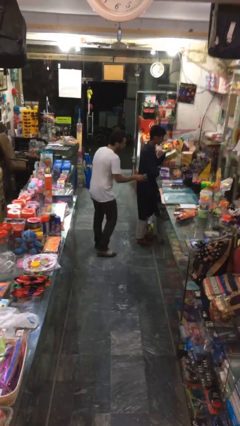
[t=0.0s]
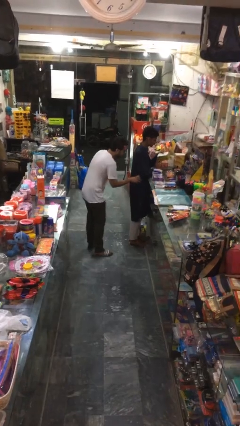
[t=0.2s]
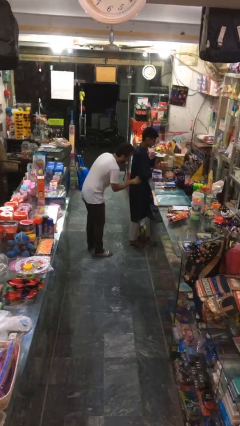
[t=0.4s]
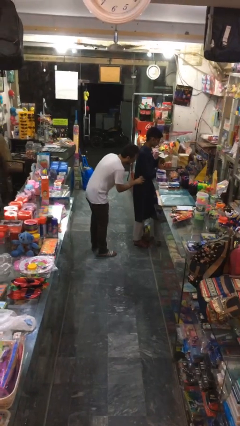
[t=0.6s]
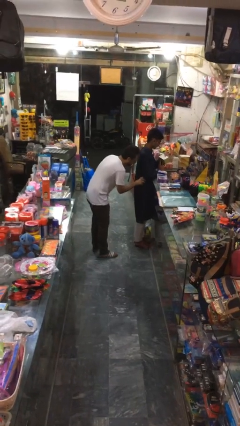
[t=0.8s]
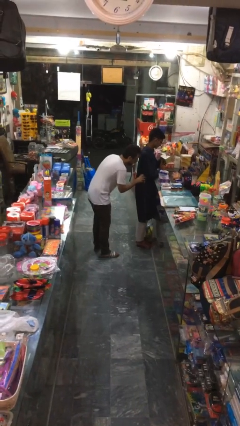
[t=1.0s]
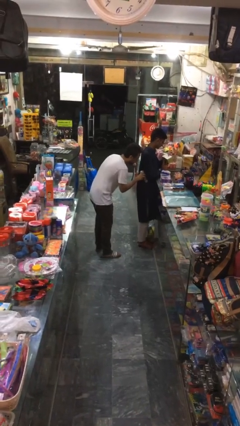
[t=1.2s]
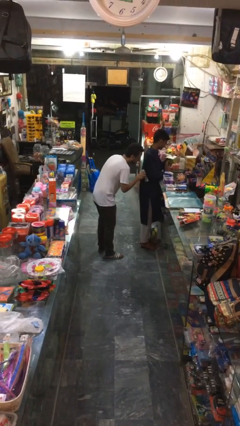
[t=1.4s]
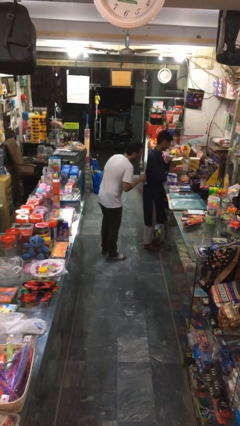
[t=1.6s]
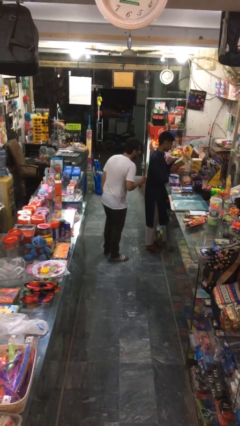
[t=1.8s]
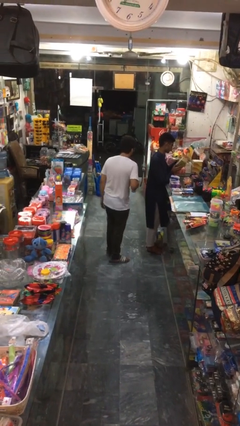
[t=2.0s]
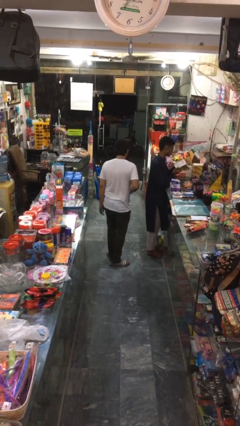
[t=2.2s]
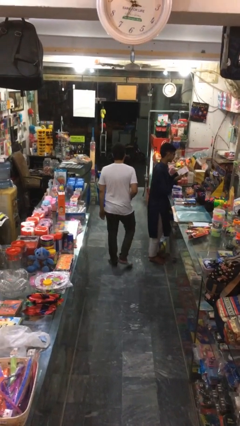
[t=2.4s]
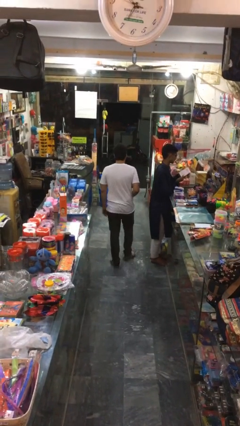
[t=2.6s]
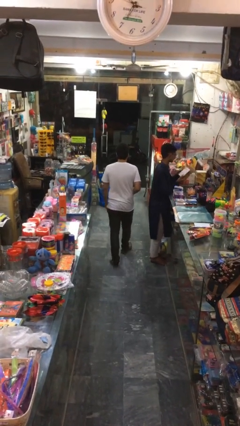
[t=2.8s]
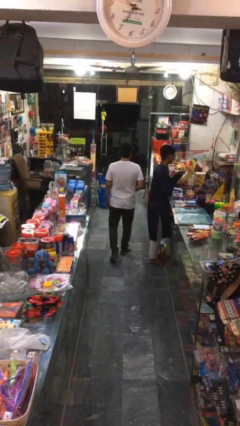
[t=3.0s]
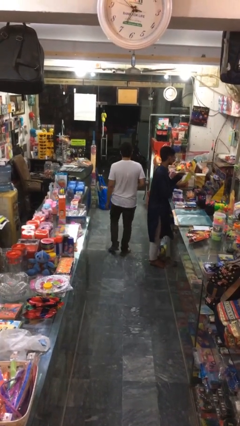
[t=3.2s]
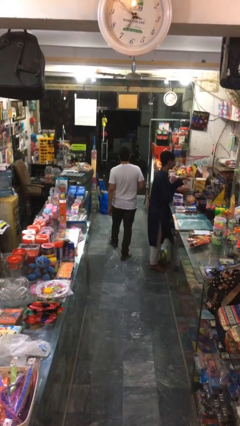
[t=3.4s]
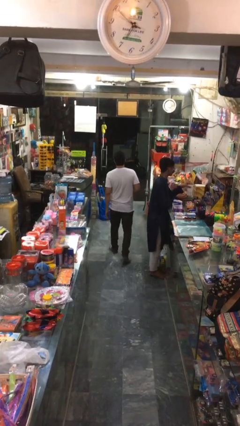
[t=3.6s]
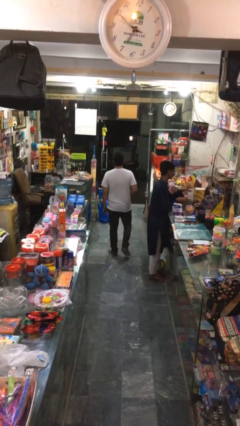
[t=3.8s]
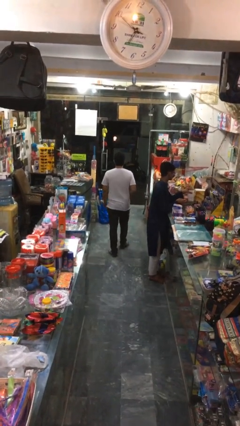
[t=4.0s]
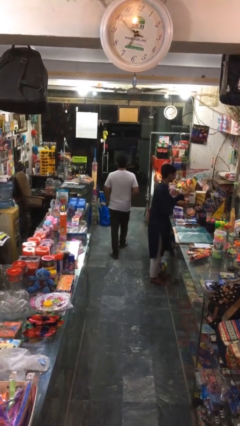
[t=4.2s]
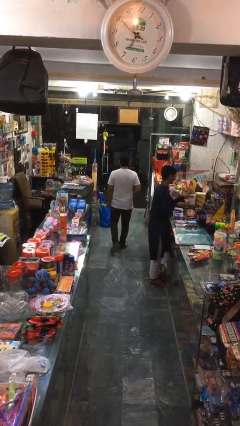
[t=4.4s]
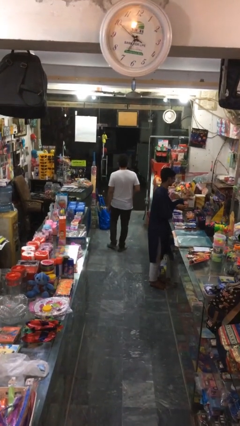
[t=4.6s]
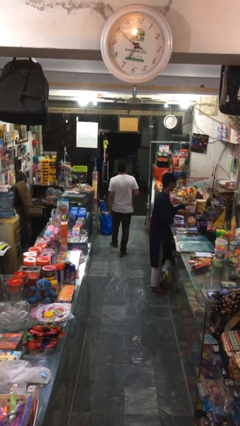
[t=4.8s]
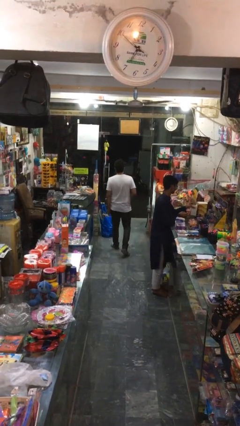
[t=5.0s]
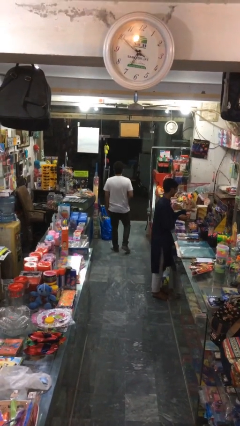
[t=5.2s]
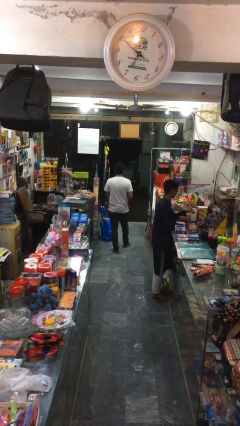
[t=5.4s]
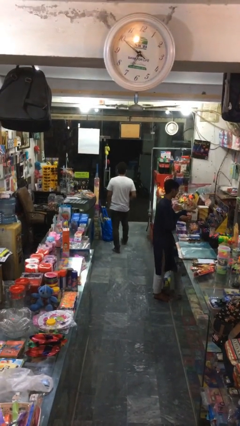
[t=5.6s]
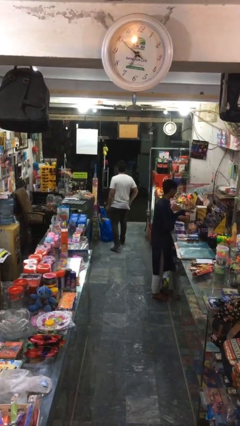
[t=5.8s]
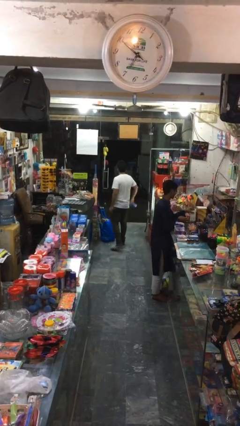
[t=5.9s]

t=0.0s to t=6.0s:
person steals object from person

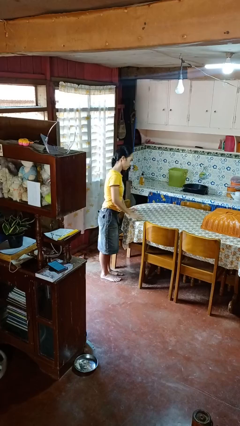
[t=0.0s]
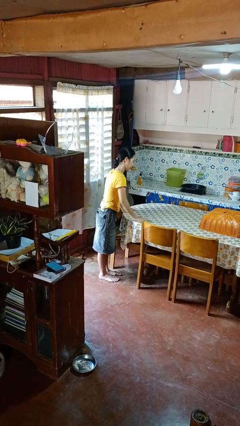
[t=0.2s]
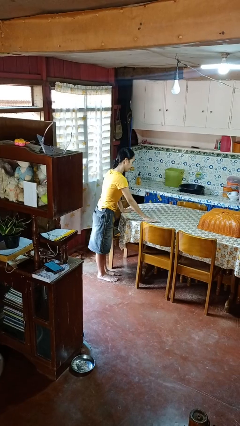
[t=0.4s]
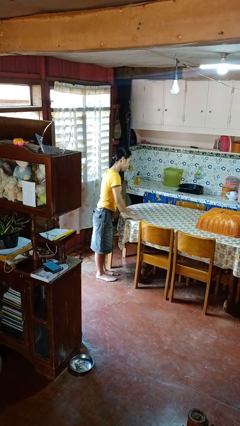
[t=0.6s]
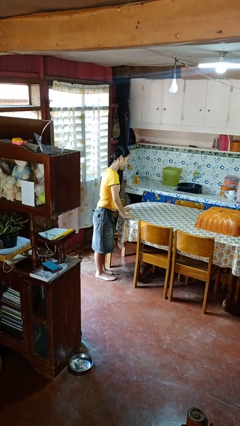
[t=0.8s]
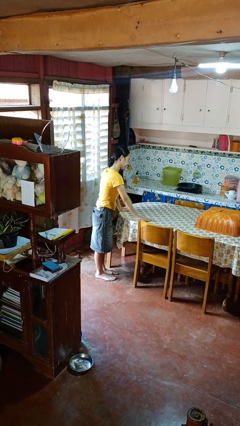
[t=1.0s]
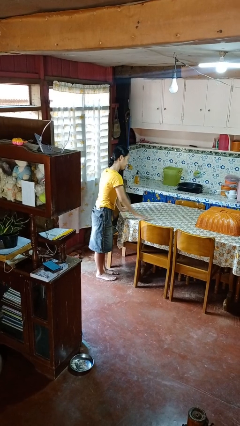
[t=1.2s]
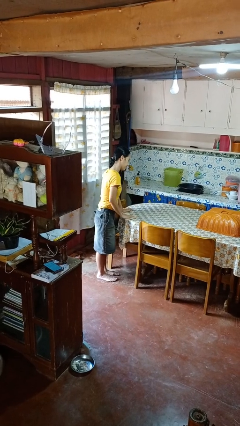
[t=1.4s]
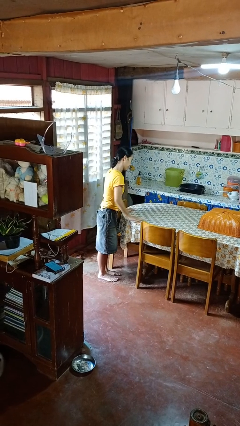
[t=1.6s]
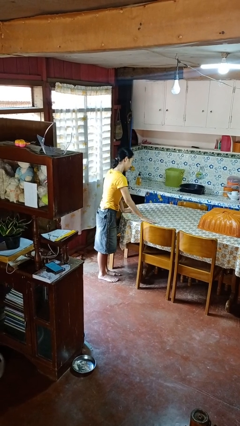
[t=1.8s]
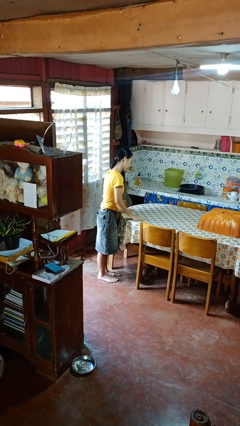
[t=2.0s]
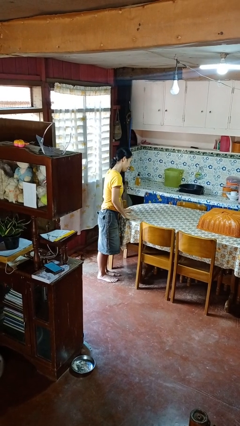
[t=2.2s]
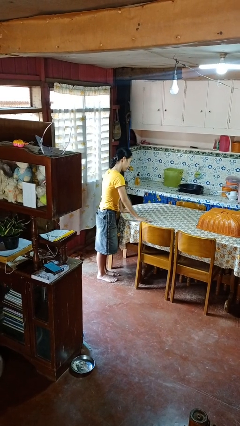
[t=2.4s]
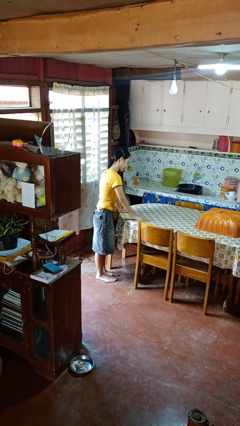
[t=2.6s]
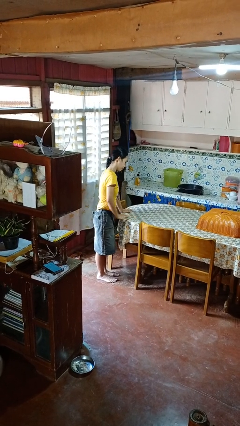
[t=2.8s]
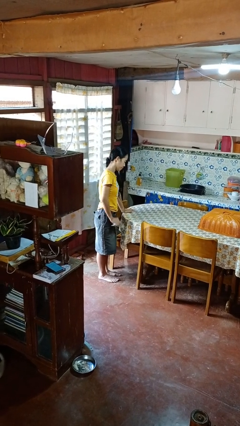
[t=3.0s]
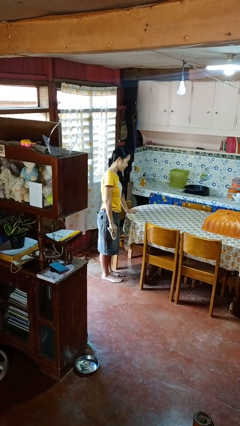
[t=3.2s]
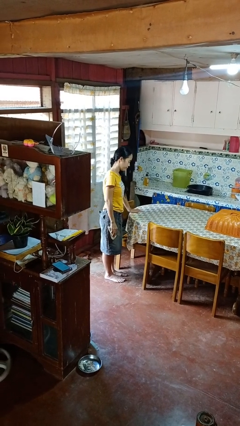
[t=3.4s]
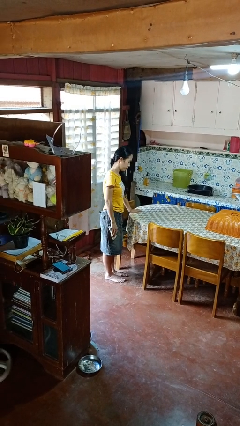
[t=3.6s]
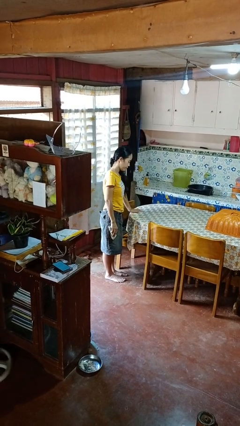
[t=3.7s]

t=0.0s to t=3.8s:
person cleans table with rag

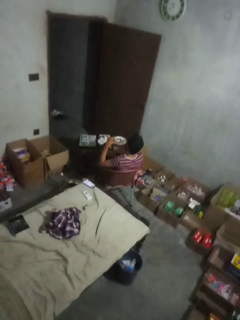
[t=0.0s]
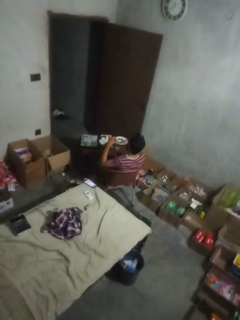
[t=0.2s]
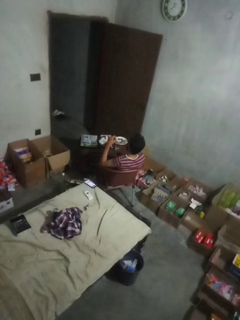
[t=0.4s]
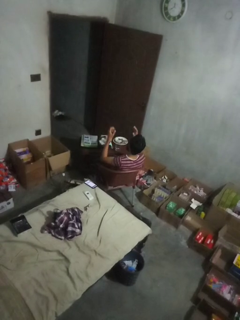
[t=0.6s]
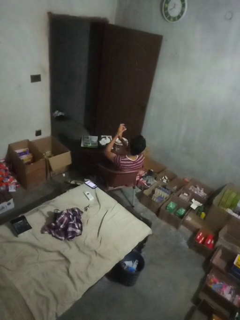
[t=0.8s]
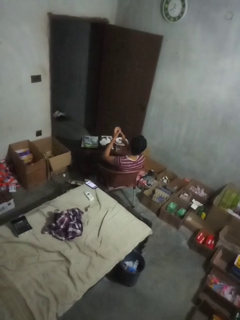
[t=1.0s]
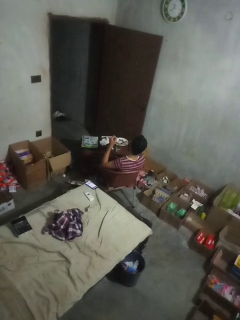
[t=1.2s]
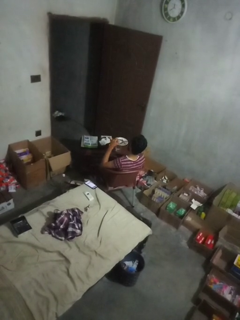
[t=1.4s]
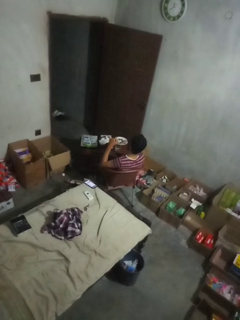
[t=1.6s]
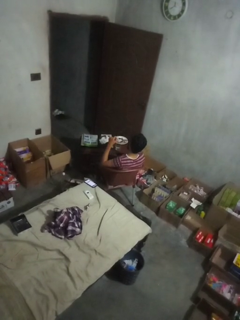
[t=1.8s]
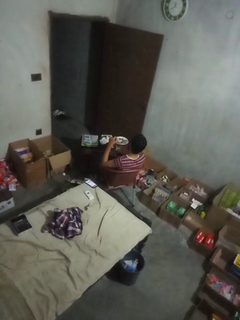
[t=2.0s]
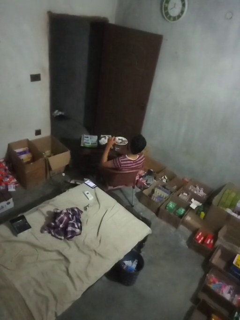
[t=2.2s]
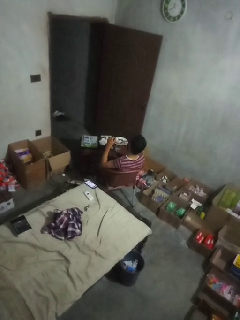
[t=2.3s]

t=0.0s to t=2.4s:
person claps hands

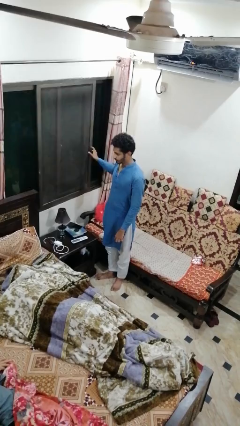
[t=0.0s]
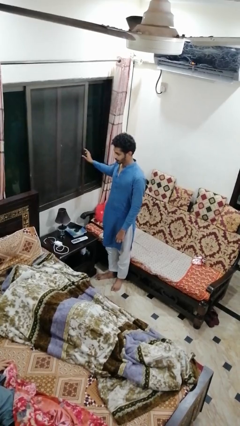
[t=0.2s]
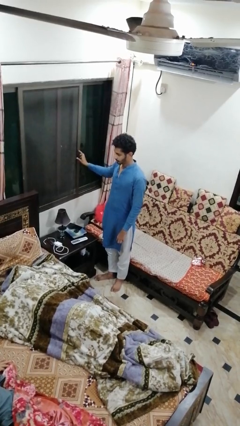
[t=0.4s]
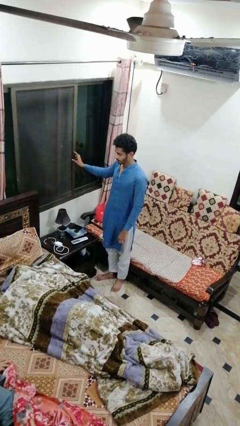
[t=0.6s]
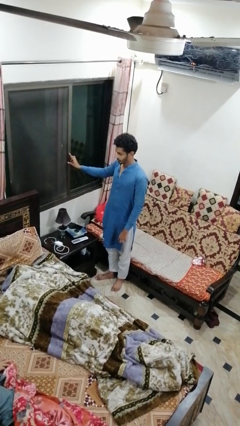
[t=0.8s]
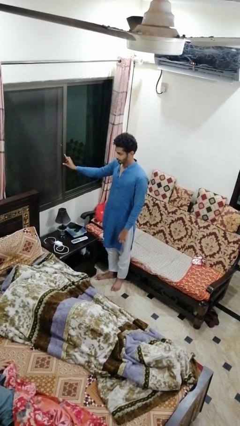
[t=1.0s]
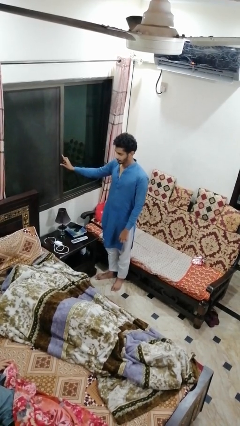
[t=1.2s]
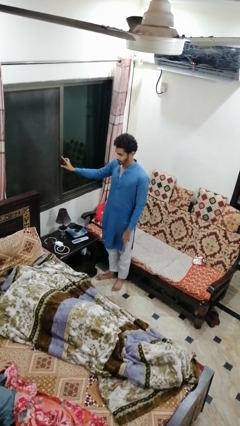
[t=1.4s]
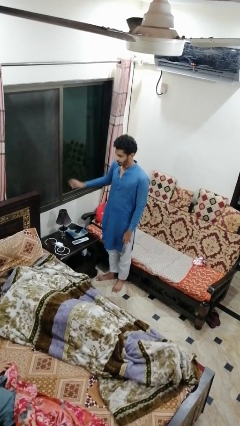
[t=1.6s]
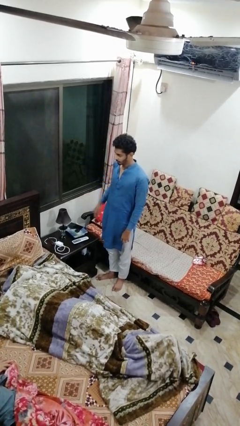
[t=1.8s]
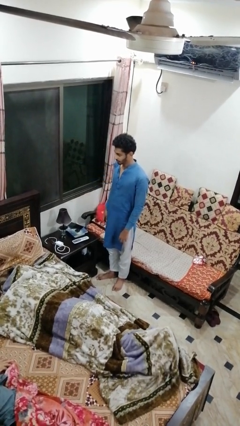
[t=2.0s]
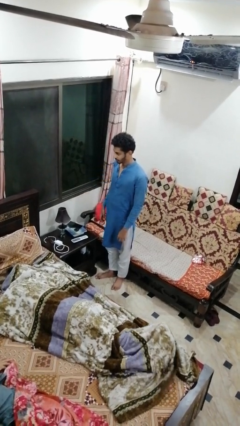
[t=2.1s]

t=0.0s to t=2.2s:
person closes home window

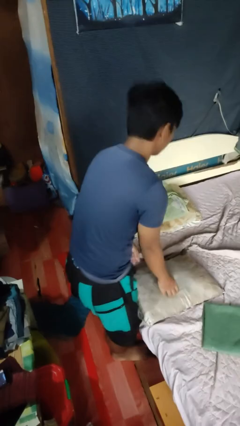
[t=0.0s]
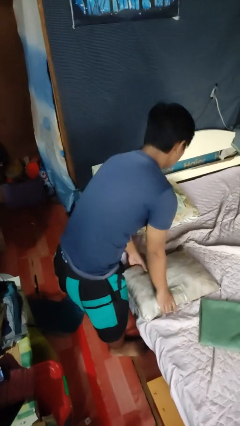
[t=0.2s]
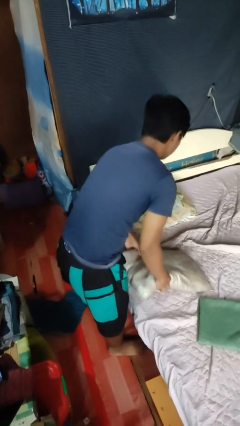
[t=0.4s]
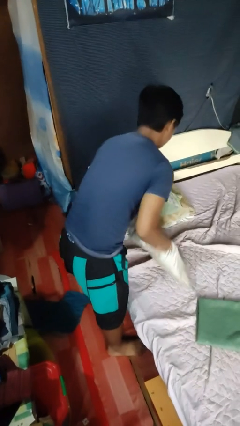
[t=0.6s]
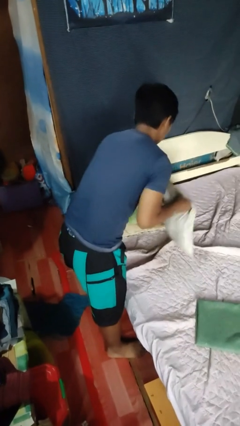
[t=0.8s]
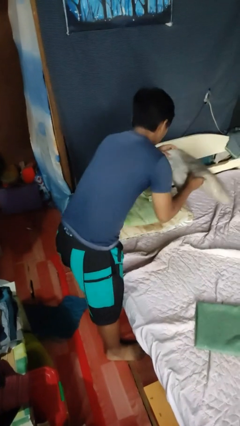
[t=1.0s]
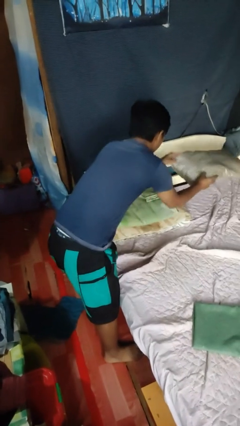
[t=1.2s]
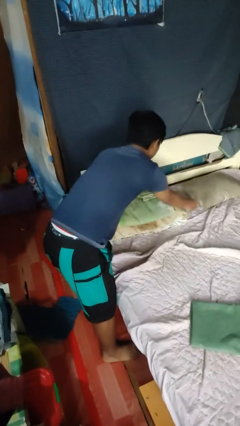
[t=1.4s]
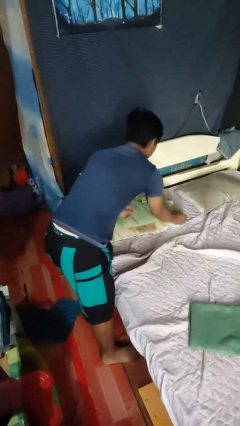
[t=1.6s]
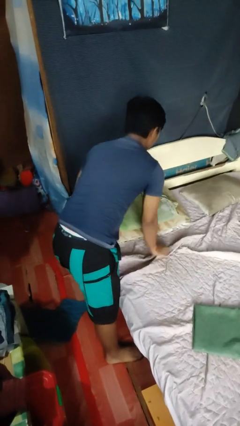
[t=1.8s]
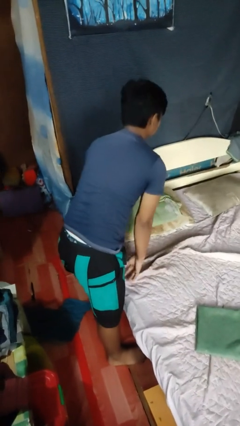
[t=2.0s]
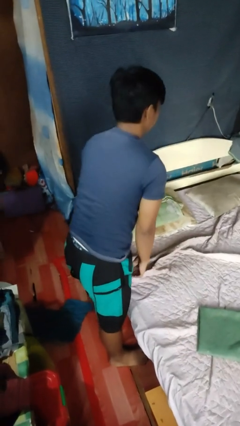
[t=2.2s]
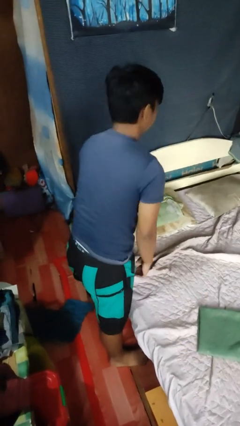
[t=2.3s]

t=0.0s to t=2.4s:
person makes bed

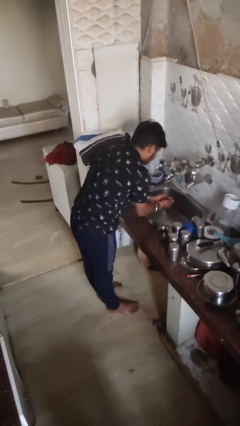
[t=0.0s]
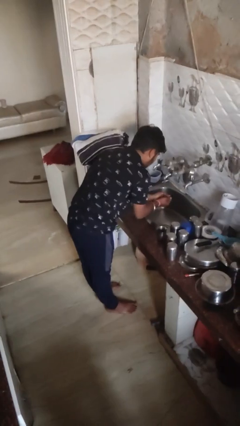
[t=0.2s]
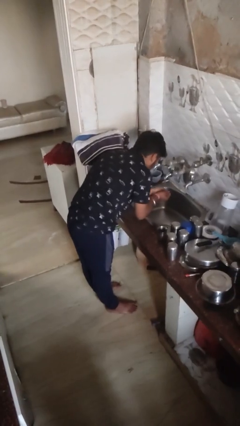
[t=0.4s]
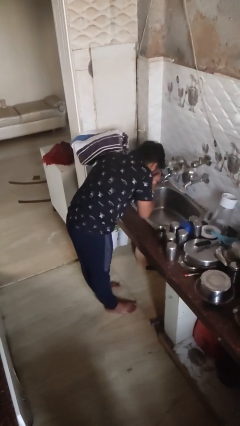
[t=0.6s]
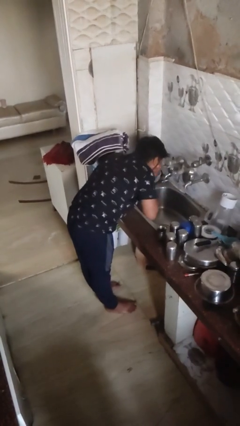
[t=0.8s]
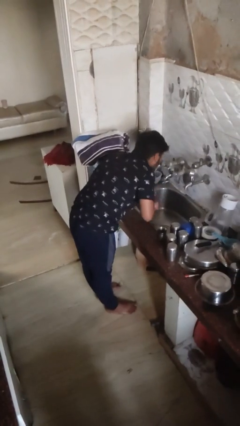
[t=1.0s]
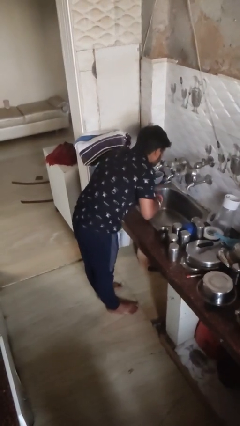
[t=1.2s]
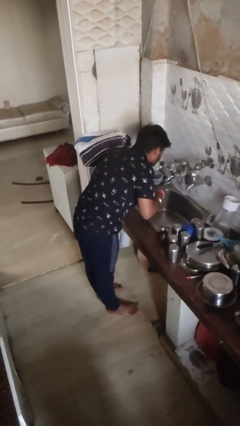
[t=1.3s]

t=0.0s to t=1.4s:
person washes face
